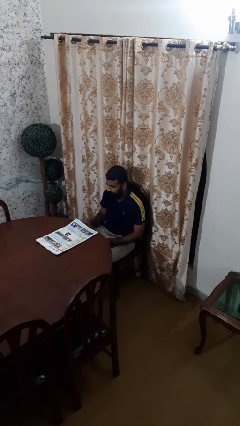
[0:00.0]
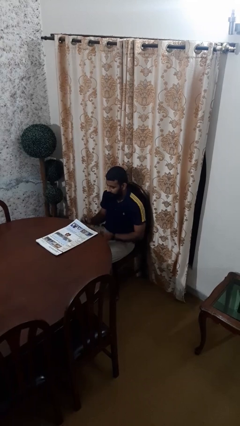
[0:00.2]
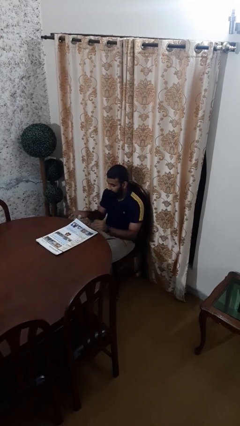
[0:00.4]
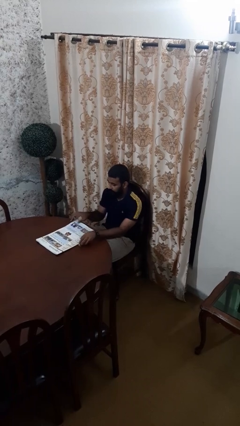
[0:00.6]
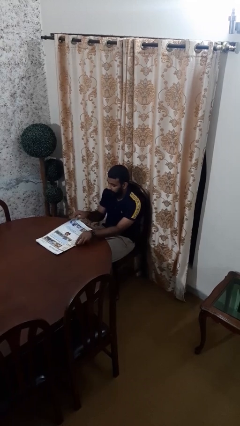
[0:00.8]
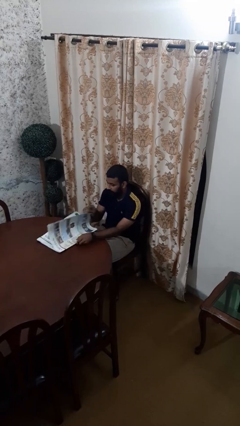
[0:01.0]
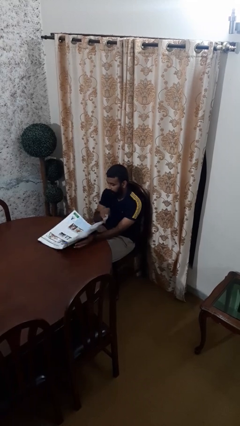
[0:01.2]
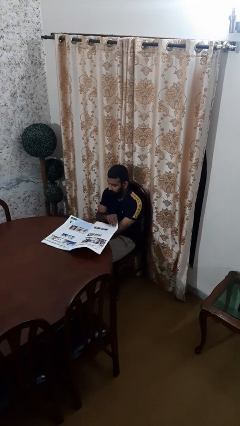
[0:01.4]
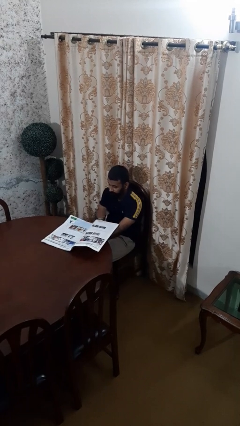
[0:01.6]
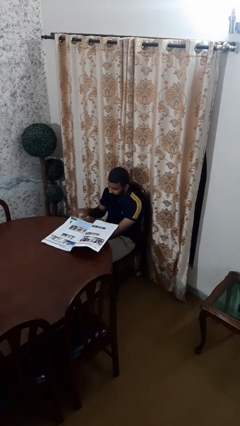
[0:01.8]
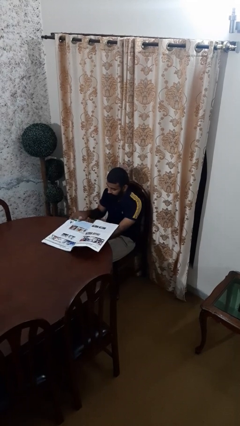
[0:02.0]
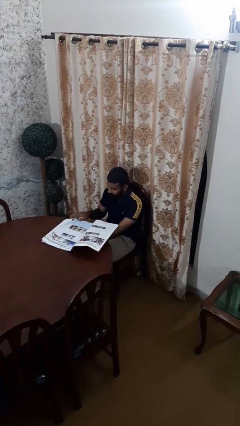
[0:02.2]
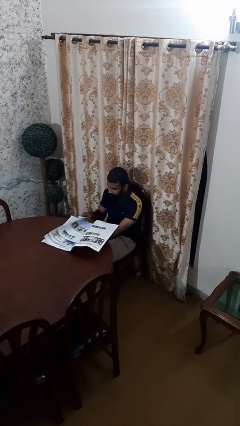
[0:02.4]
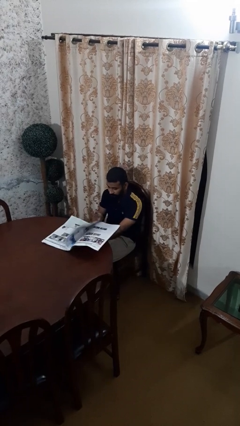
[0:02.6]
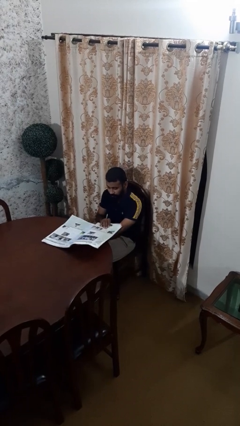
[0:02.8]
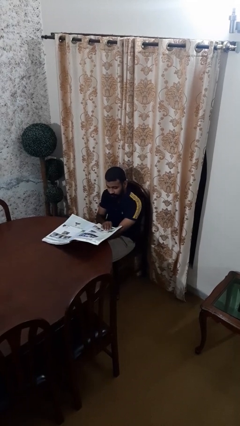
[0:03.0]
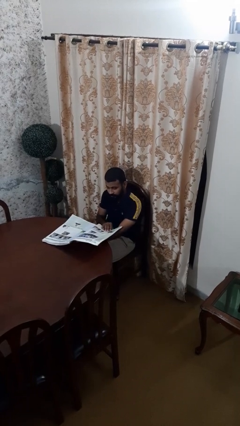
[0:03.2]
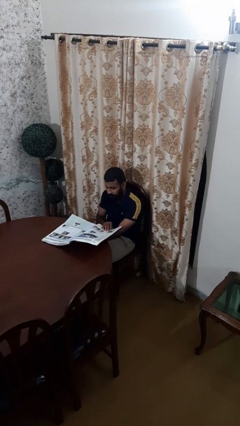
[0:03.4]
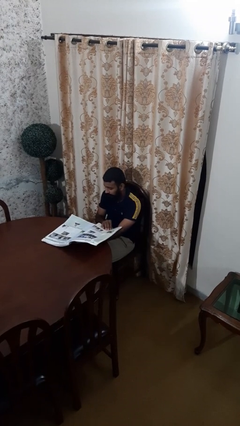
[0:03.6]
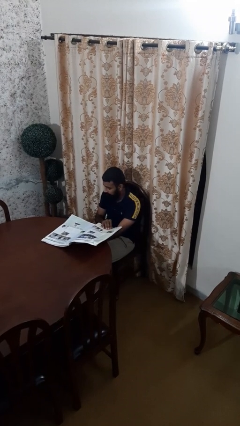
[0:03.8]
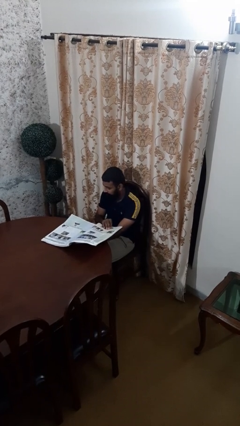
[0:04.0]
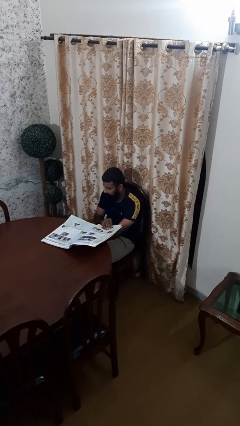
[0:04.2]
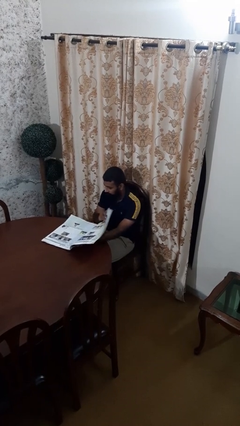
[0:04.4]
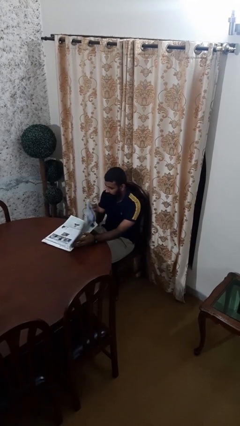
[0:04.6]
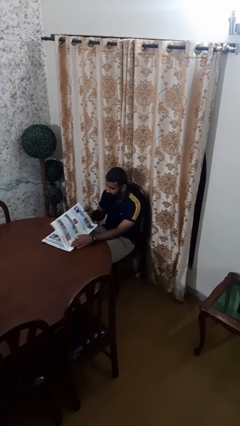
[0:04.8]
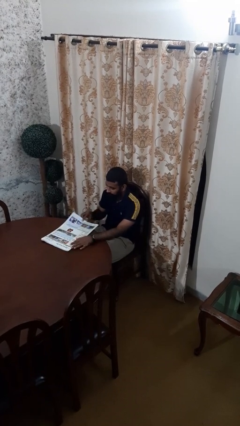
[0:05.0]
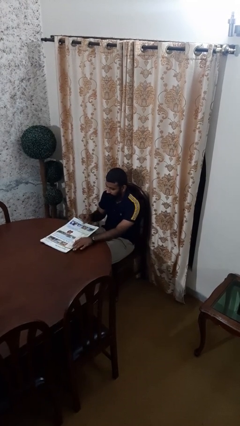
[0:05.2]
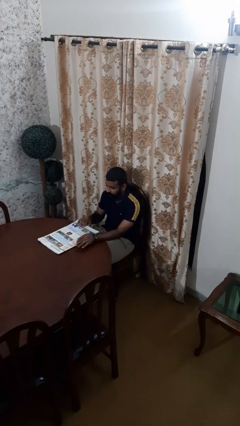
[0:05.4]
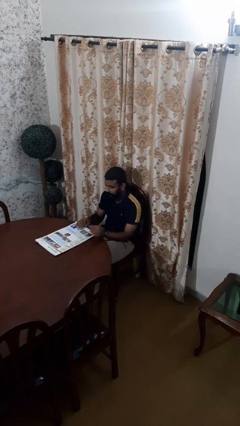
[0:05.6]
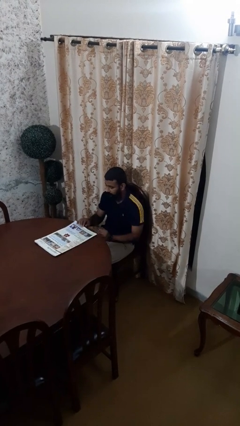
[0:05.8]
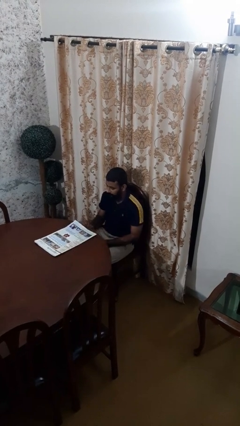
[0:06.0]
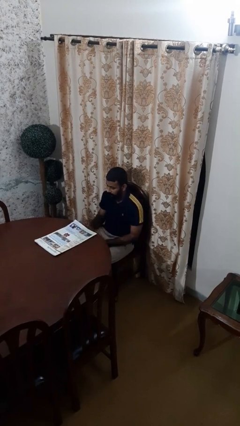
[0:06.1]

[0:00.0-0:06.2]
person reads magazine

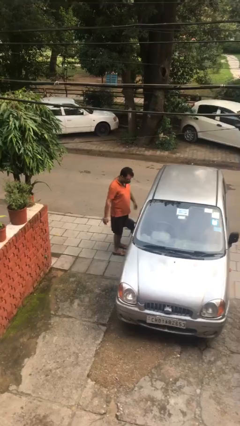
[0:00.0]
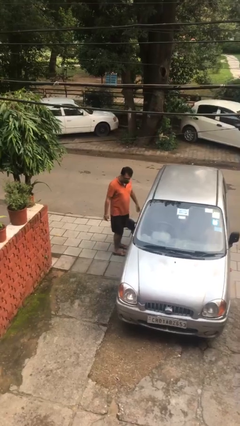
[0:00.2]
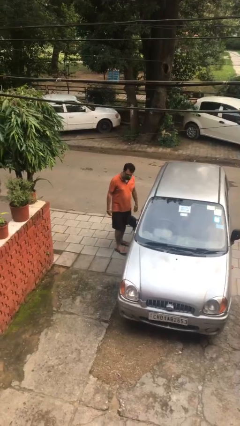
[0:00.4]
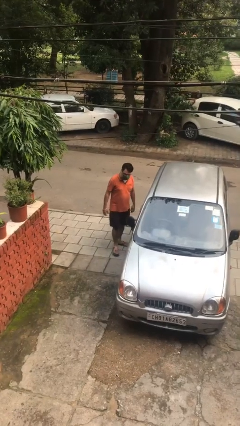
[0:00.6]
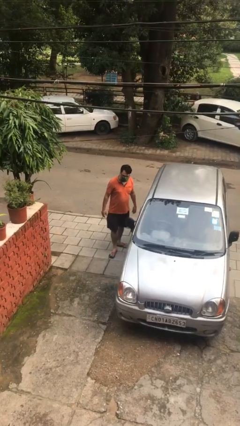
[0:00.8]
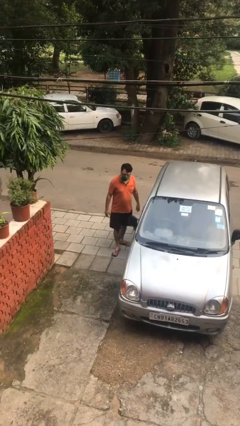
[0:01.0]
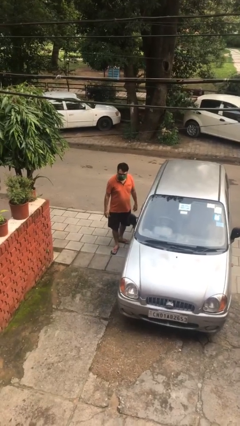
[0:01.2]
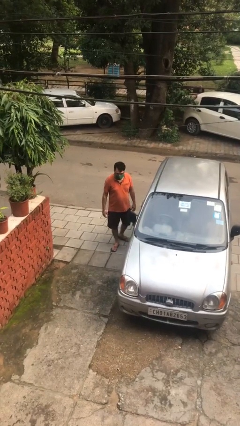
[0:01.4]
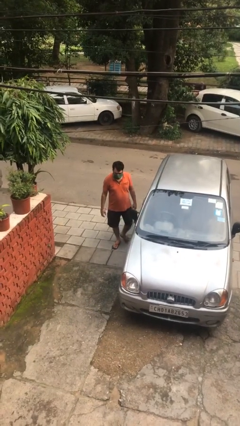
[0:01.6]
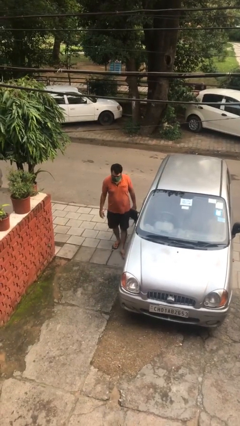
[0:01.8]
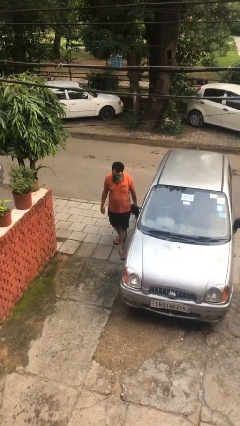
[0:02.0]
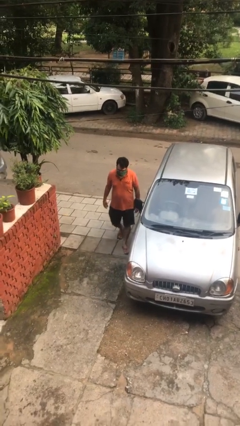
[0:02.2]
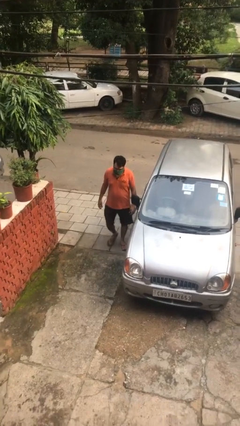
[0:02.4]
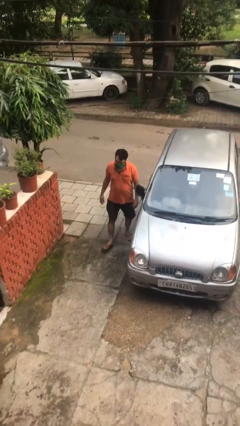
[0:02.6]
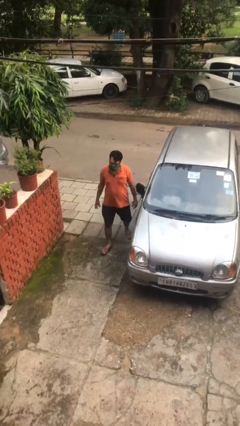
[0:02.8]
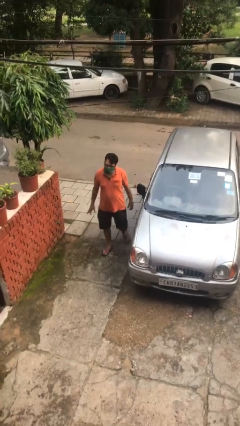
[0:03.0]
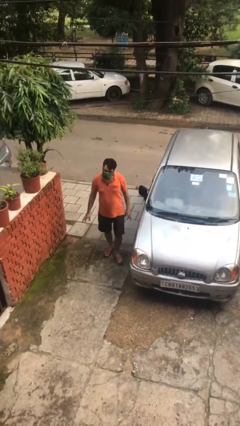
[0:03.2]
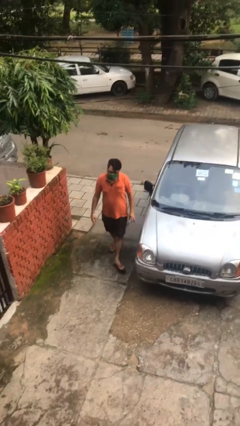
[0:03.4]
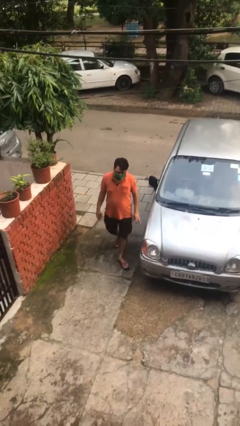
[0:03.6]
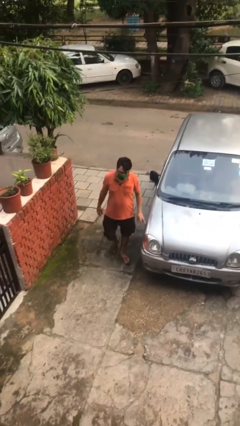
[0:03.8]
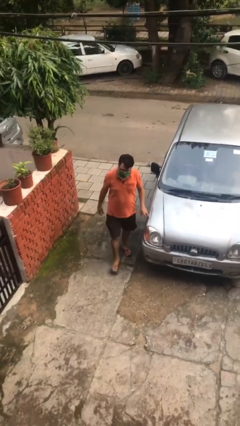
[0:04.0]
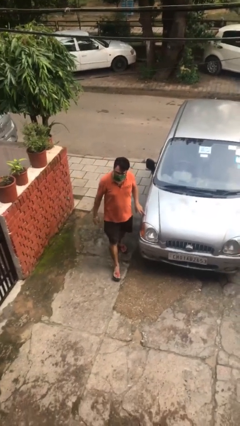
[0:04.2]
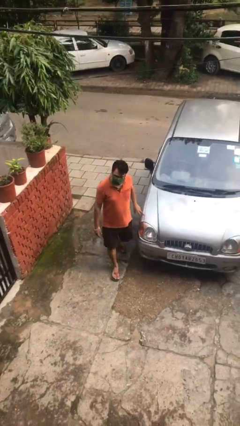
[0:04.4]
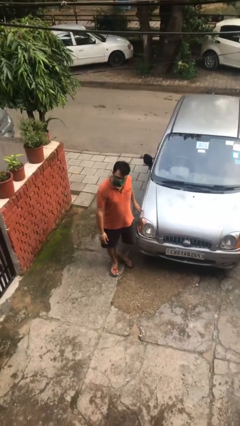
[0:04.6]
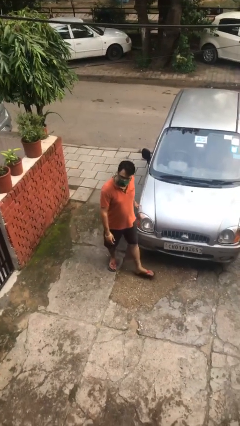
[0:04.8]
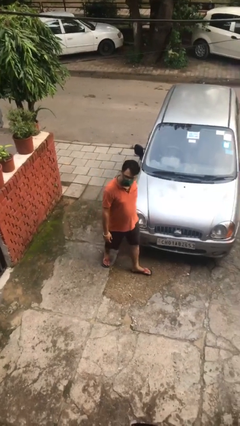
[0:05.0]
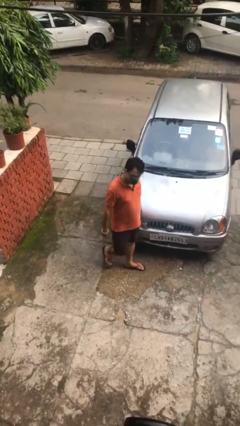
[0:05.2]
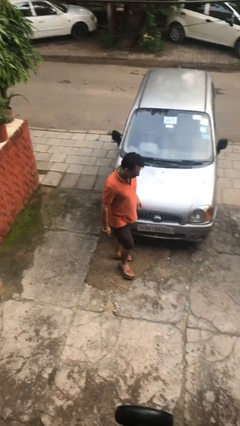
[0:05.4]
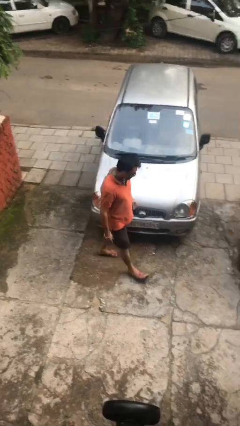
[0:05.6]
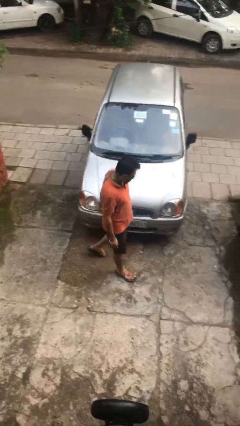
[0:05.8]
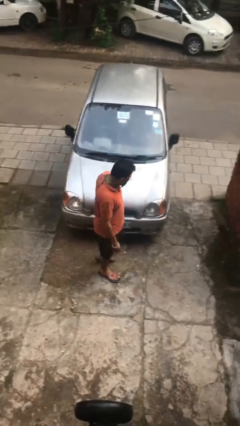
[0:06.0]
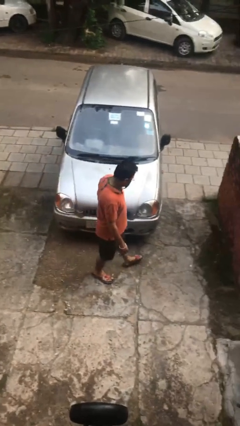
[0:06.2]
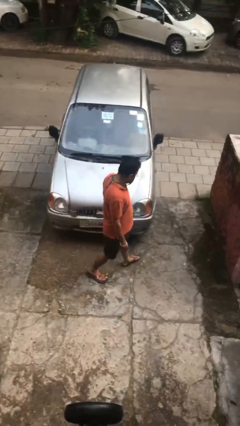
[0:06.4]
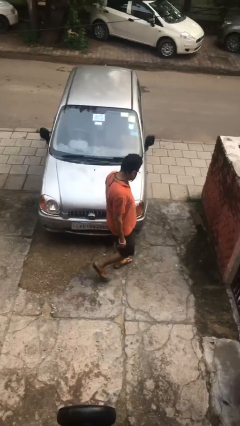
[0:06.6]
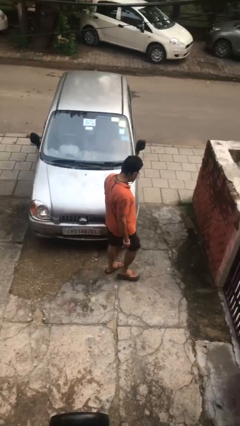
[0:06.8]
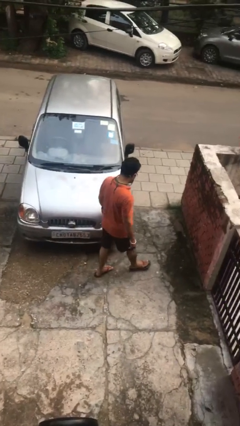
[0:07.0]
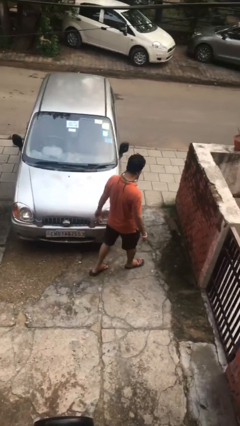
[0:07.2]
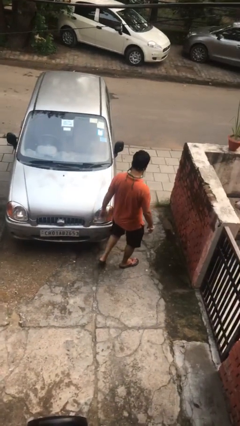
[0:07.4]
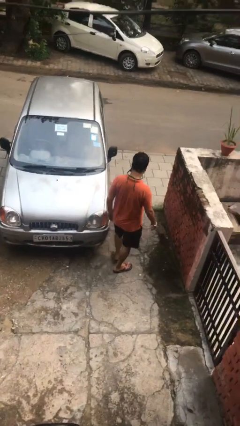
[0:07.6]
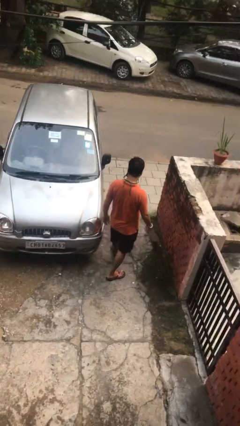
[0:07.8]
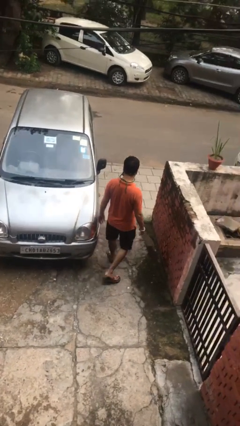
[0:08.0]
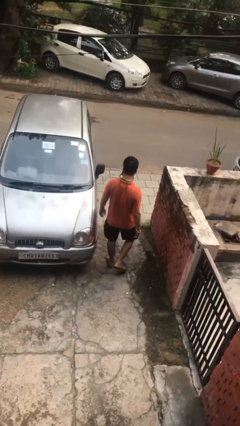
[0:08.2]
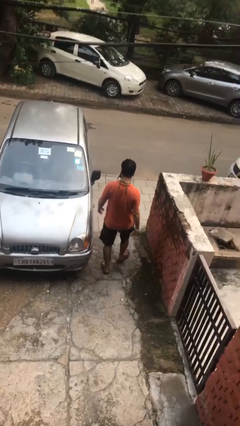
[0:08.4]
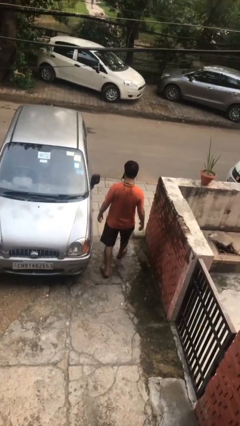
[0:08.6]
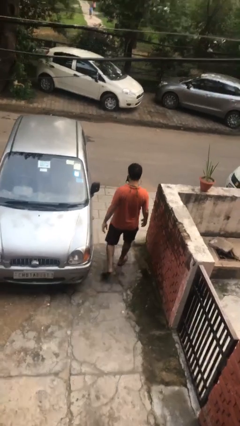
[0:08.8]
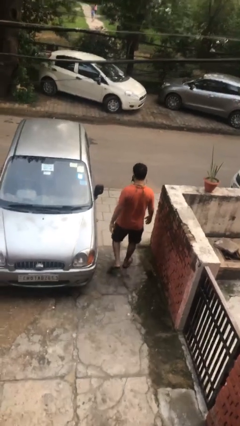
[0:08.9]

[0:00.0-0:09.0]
person walks around car

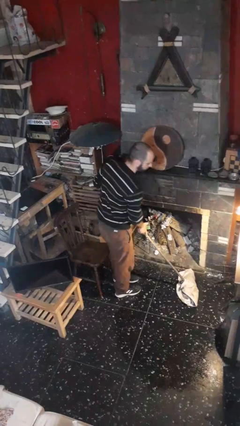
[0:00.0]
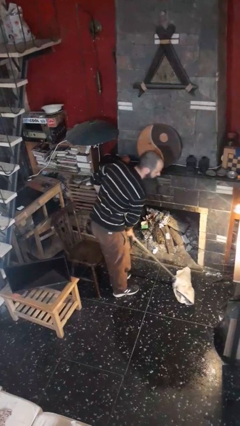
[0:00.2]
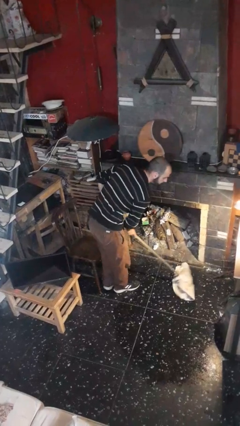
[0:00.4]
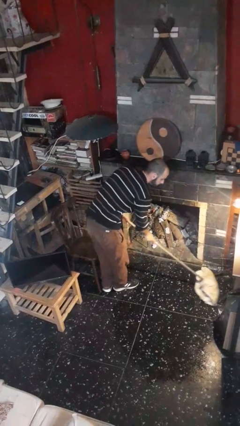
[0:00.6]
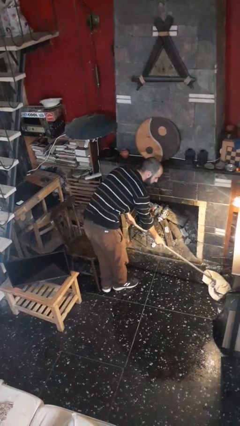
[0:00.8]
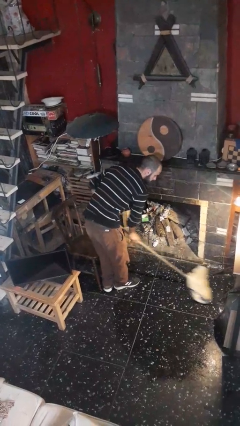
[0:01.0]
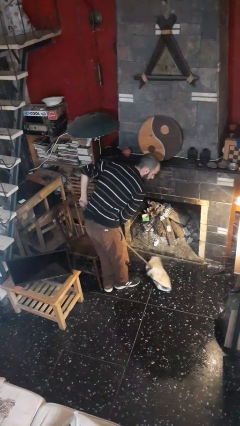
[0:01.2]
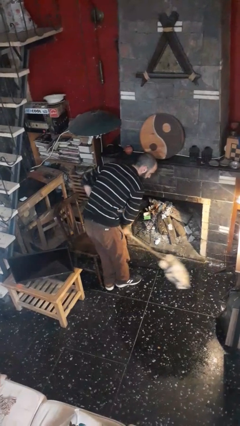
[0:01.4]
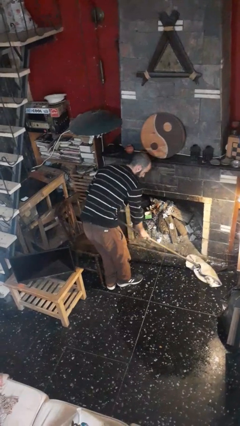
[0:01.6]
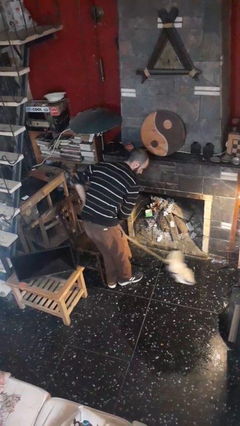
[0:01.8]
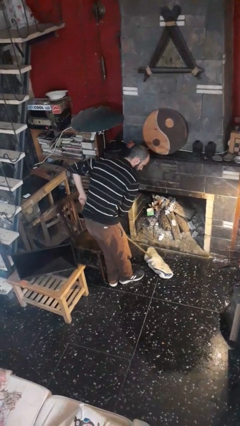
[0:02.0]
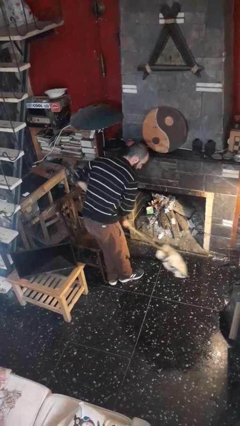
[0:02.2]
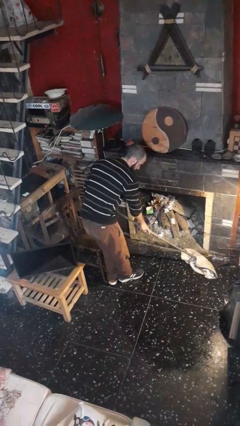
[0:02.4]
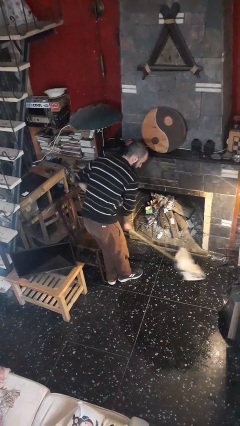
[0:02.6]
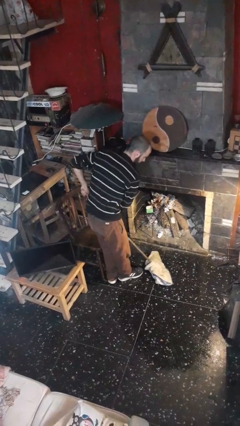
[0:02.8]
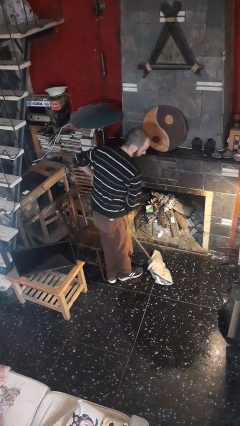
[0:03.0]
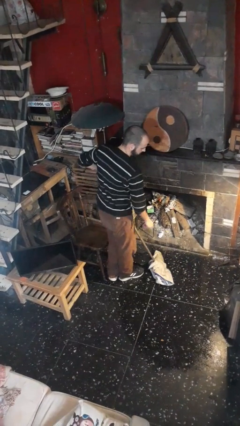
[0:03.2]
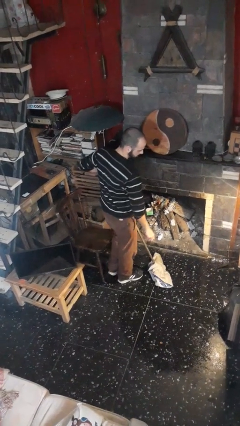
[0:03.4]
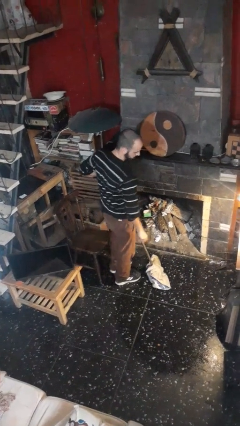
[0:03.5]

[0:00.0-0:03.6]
person mops
